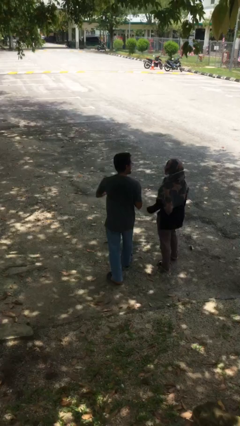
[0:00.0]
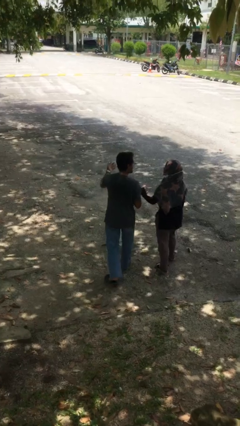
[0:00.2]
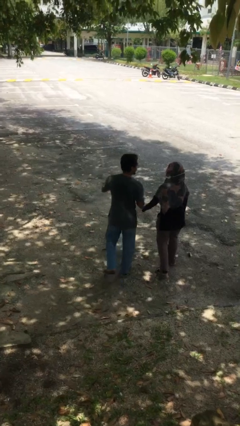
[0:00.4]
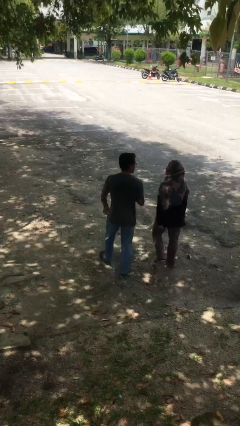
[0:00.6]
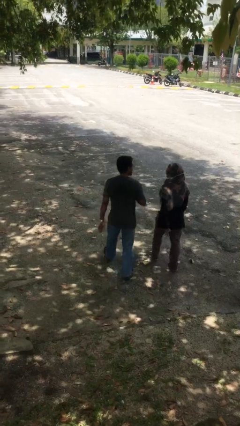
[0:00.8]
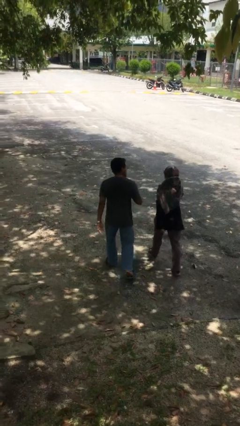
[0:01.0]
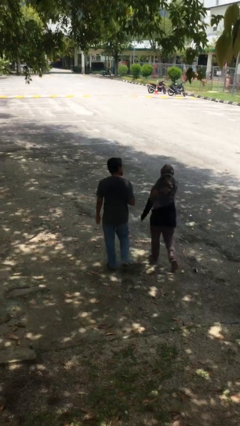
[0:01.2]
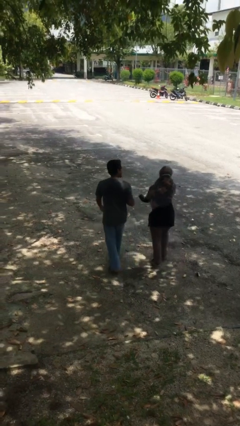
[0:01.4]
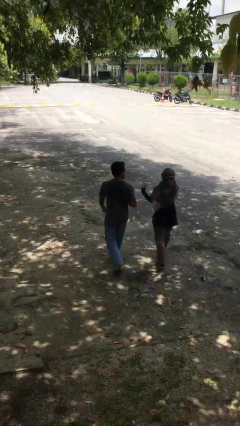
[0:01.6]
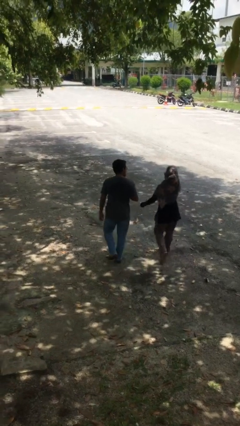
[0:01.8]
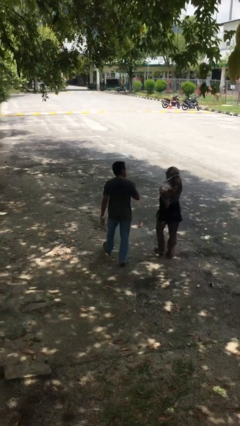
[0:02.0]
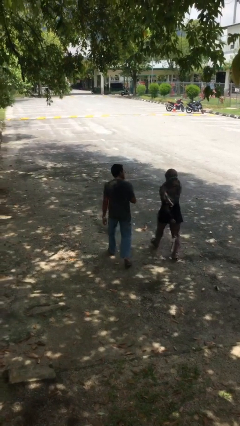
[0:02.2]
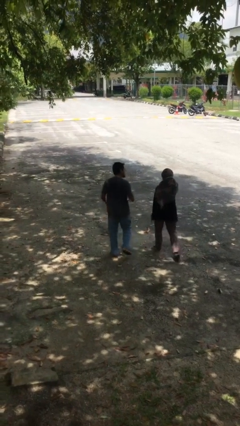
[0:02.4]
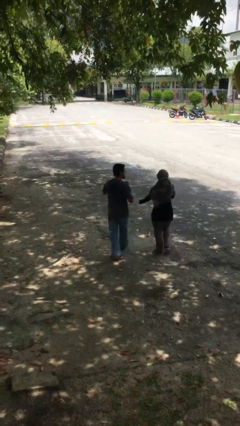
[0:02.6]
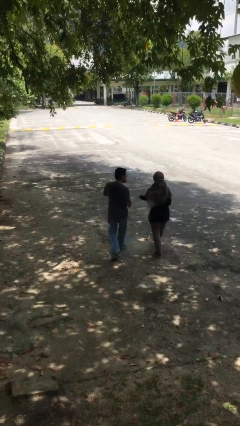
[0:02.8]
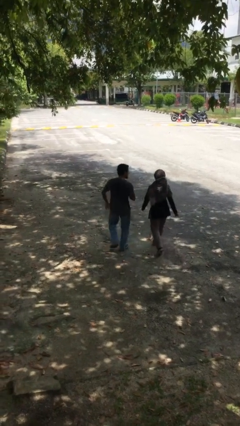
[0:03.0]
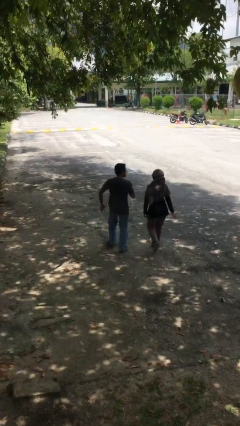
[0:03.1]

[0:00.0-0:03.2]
person talks to person

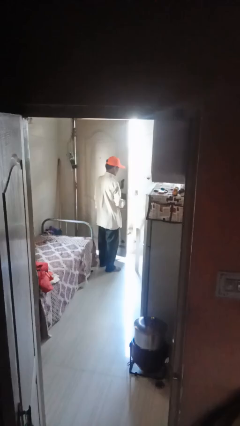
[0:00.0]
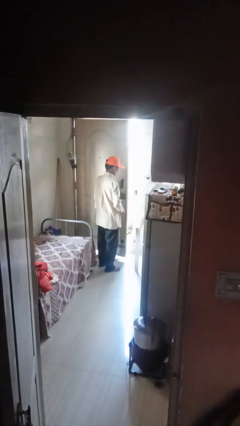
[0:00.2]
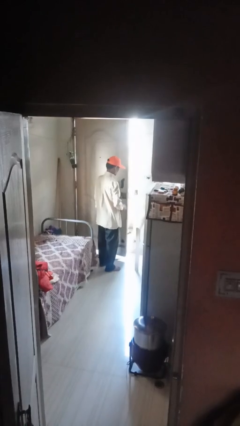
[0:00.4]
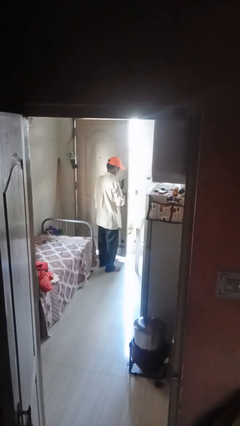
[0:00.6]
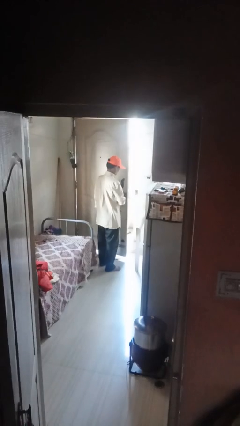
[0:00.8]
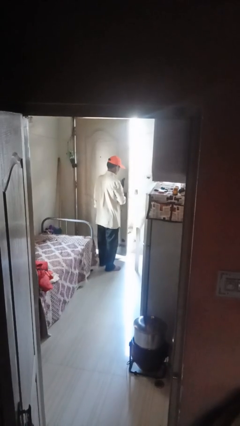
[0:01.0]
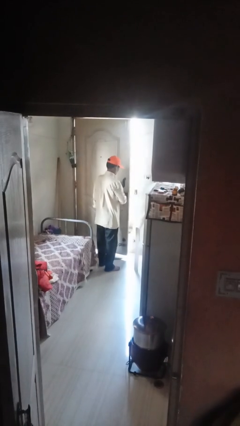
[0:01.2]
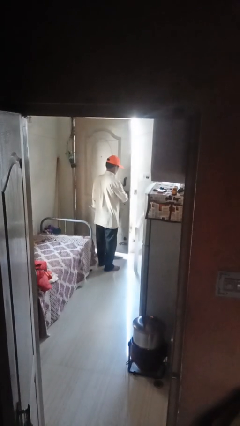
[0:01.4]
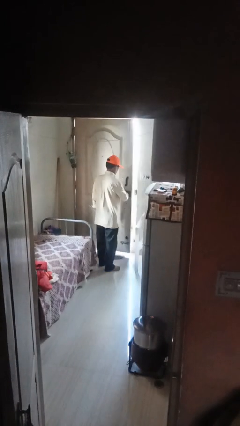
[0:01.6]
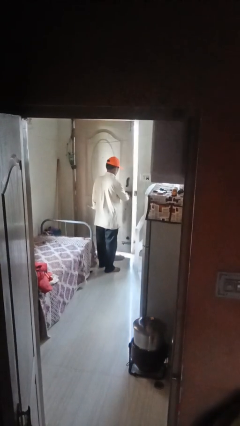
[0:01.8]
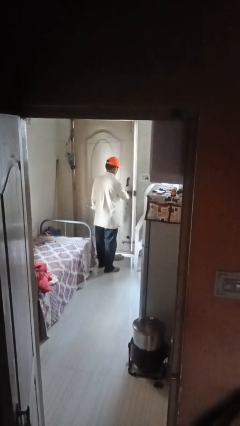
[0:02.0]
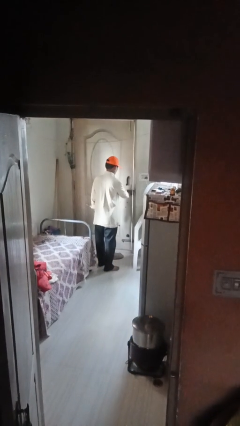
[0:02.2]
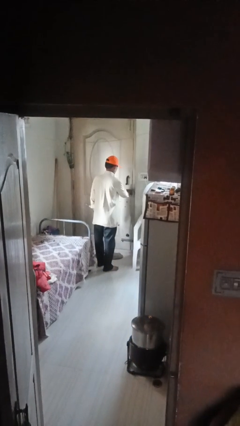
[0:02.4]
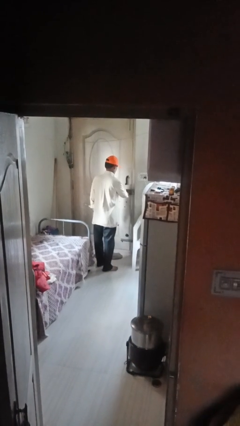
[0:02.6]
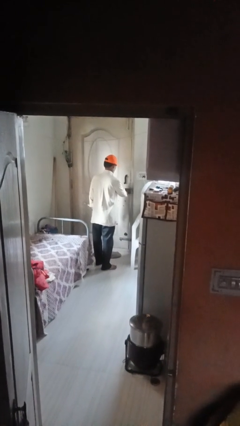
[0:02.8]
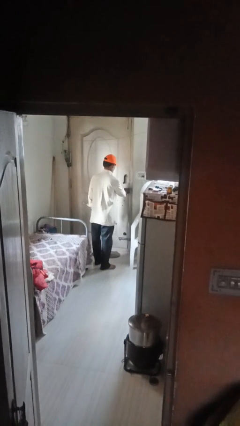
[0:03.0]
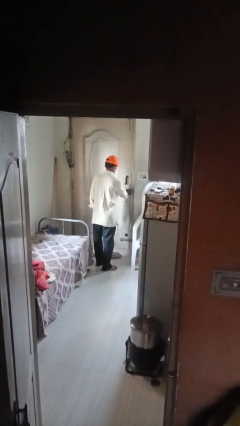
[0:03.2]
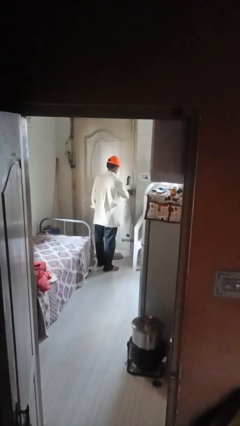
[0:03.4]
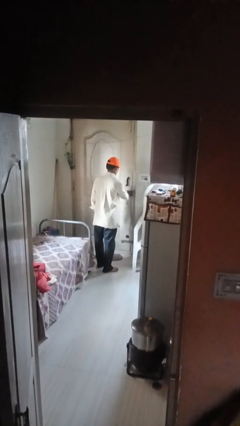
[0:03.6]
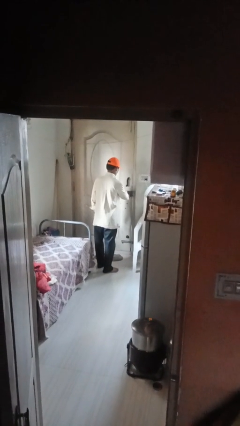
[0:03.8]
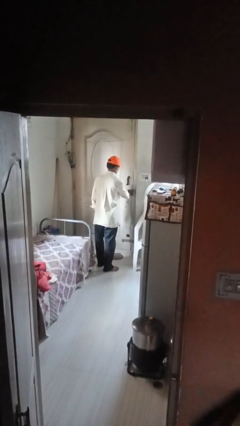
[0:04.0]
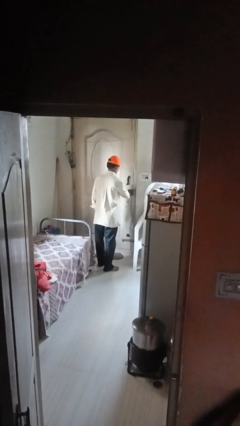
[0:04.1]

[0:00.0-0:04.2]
person closes facility door

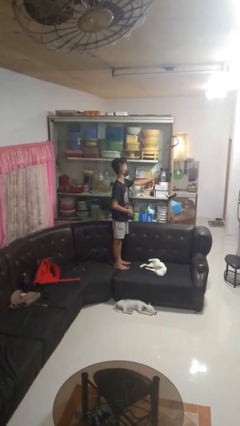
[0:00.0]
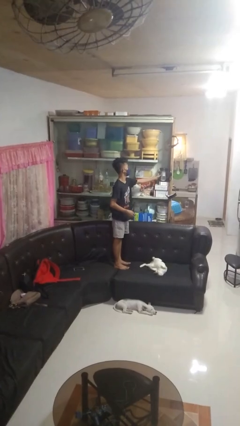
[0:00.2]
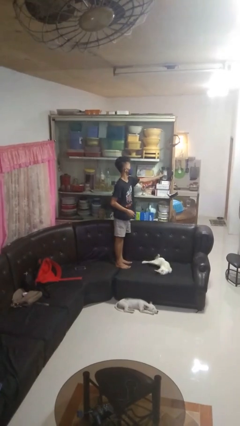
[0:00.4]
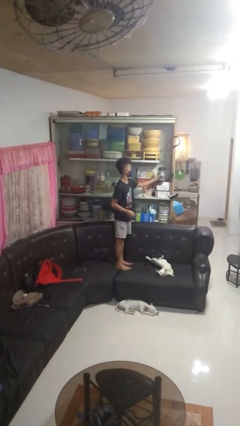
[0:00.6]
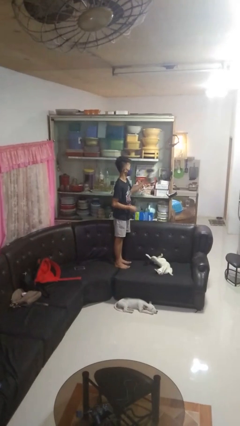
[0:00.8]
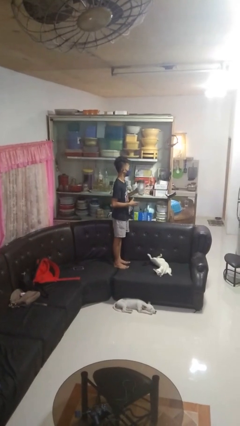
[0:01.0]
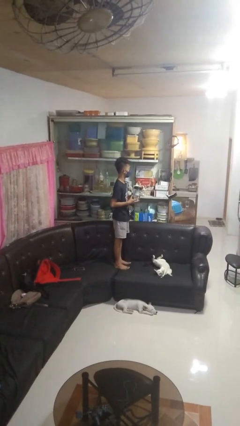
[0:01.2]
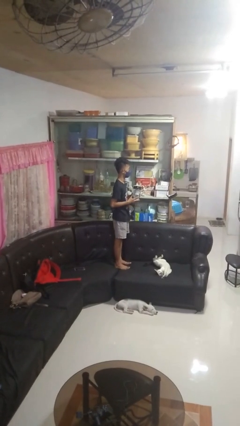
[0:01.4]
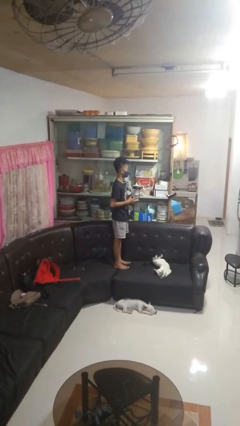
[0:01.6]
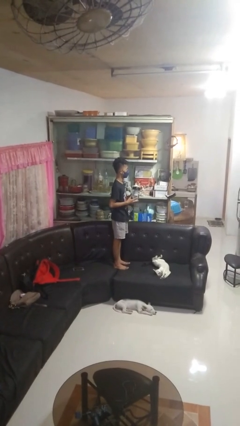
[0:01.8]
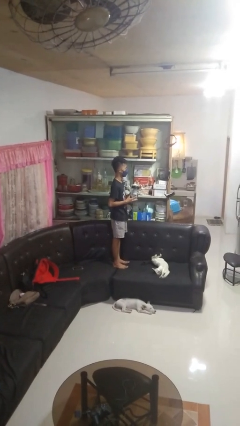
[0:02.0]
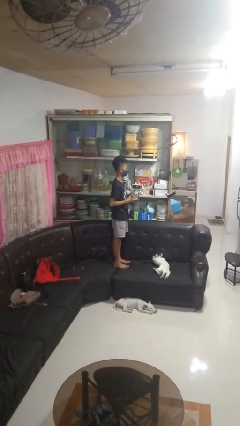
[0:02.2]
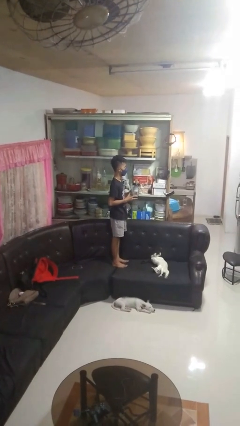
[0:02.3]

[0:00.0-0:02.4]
person picks up object from cabinet

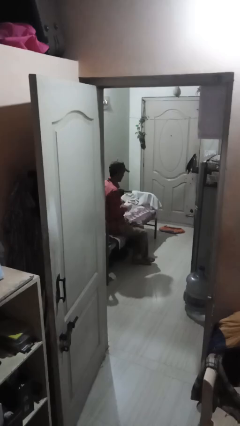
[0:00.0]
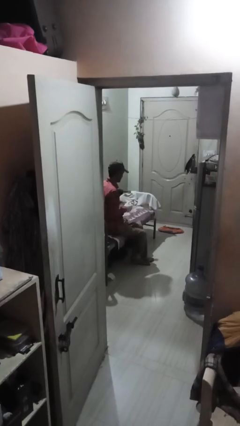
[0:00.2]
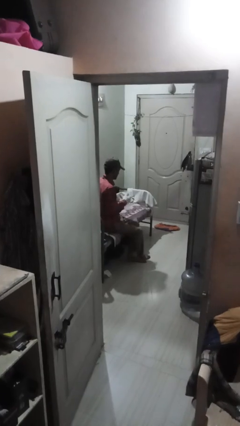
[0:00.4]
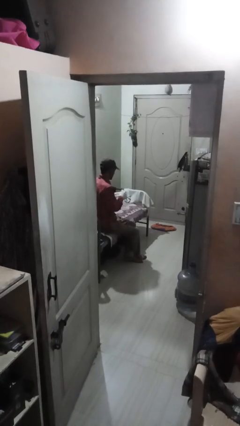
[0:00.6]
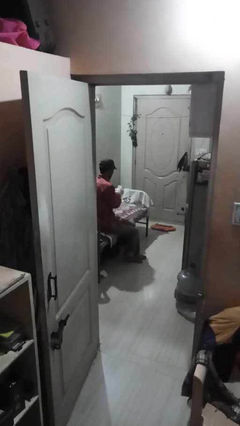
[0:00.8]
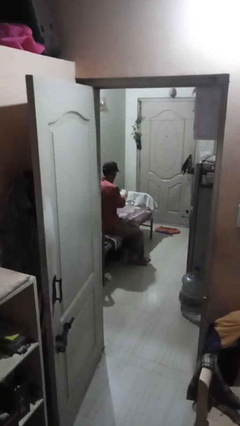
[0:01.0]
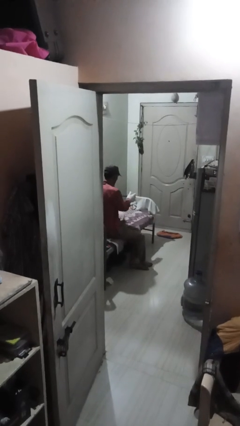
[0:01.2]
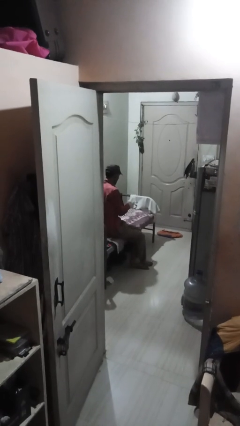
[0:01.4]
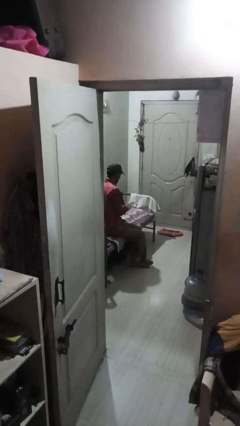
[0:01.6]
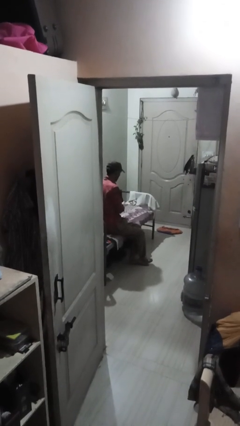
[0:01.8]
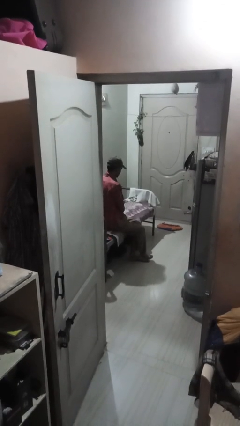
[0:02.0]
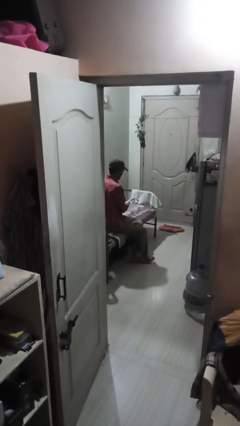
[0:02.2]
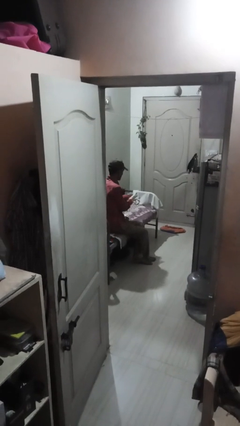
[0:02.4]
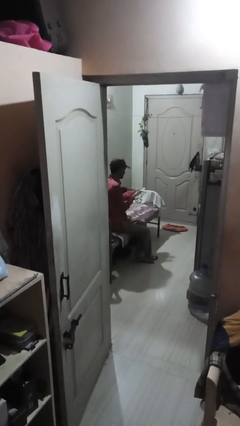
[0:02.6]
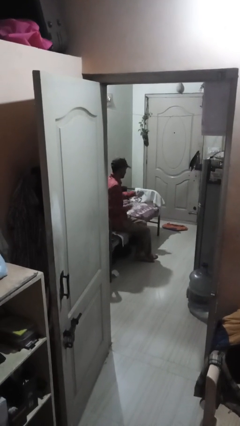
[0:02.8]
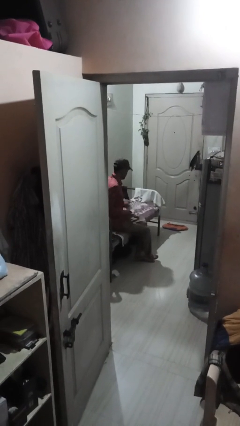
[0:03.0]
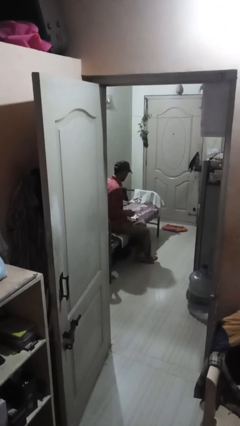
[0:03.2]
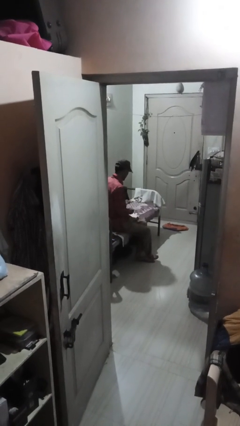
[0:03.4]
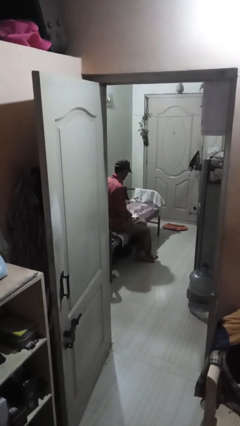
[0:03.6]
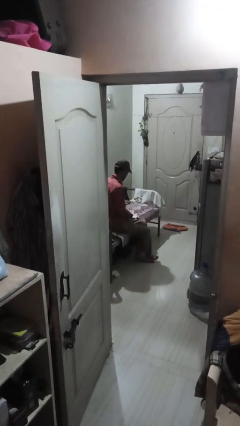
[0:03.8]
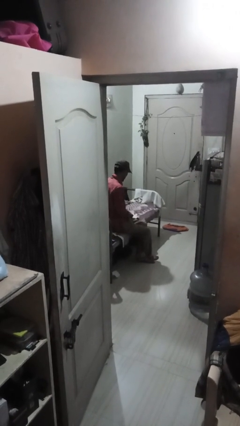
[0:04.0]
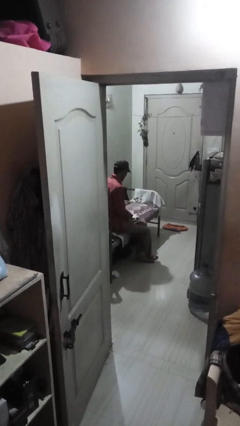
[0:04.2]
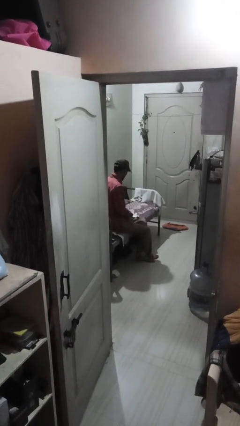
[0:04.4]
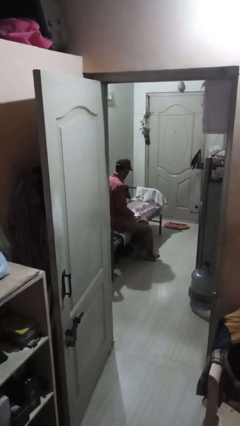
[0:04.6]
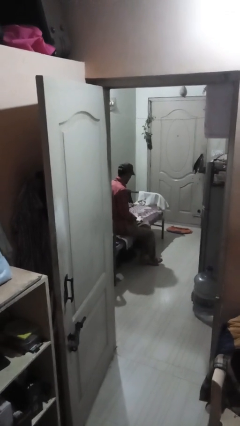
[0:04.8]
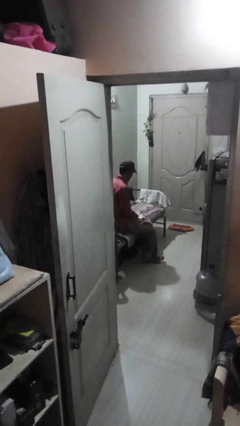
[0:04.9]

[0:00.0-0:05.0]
person takes off gloves

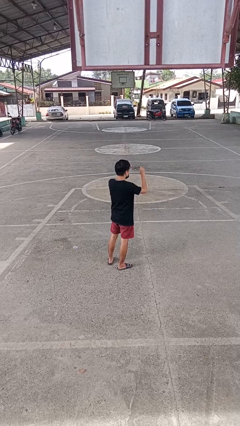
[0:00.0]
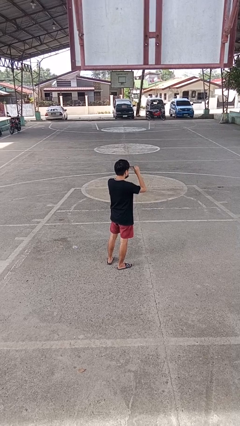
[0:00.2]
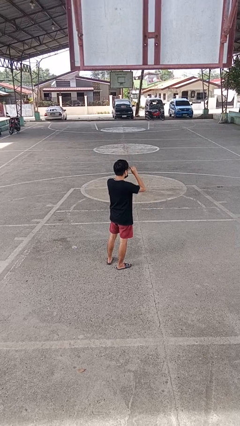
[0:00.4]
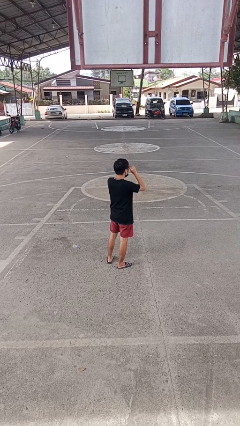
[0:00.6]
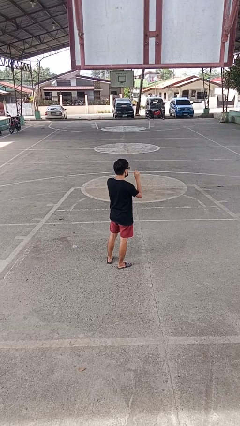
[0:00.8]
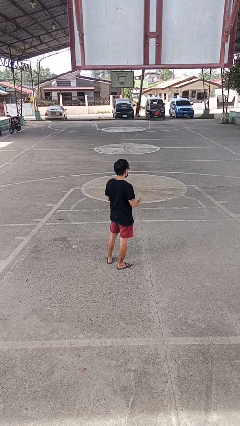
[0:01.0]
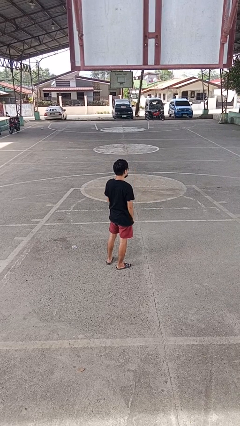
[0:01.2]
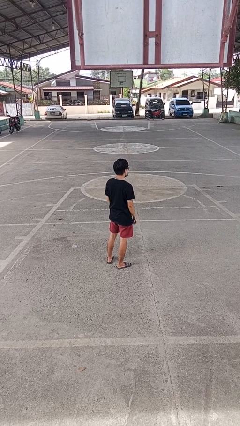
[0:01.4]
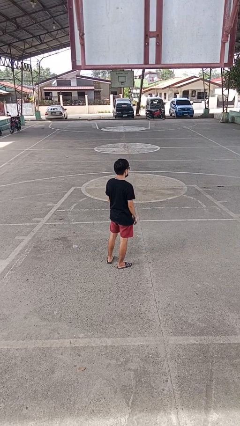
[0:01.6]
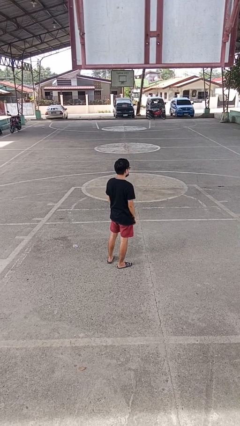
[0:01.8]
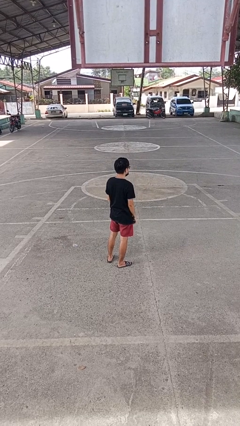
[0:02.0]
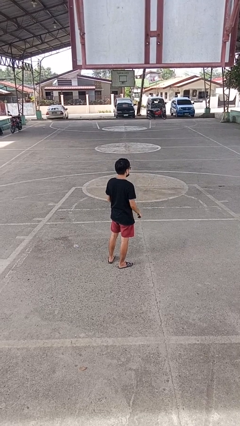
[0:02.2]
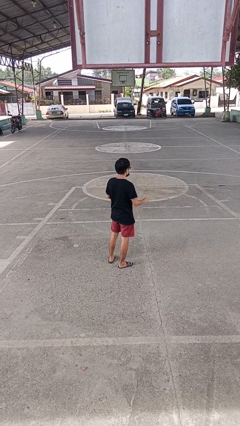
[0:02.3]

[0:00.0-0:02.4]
person puts on glasses

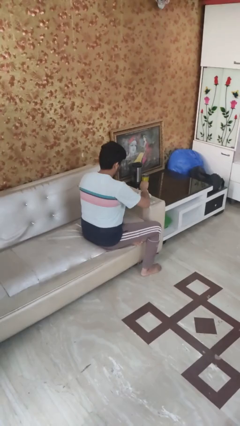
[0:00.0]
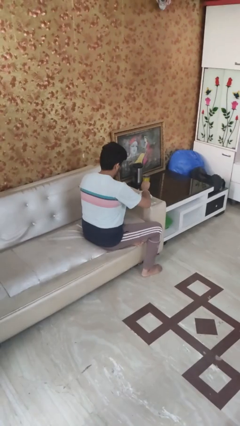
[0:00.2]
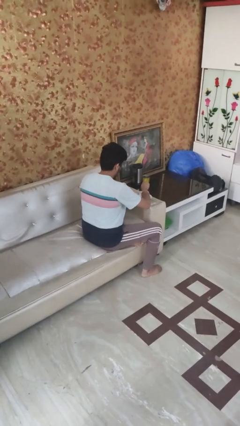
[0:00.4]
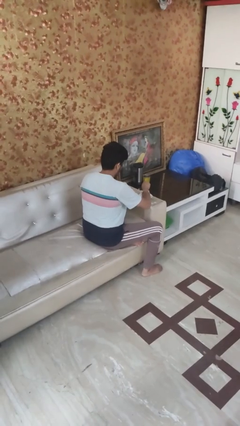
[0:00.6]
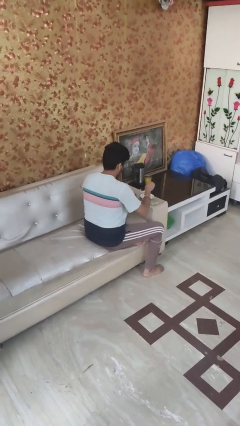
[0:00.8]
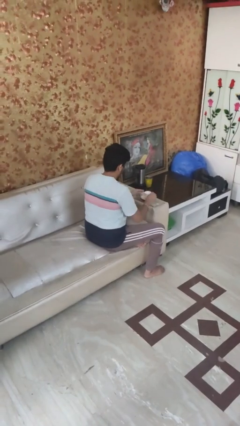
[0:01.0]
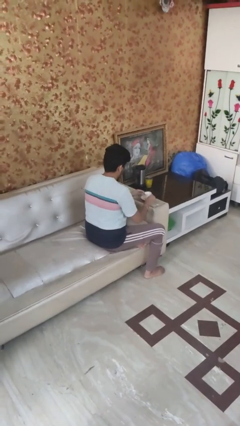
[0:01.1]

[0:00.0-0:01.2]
person stirs mug
